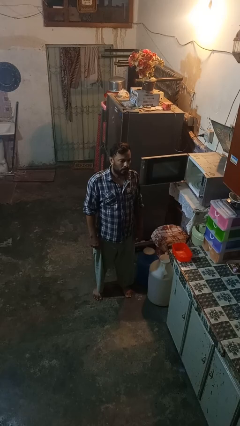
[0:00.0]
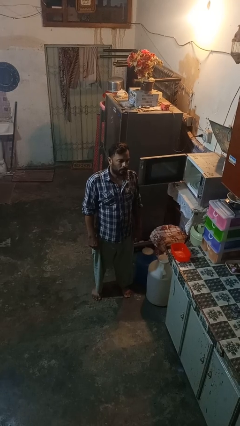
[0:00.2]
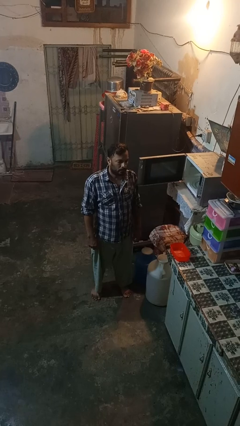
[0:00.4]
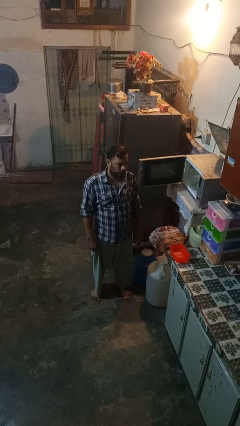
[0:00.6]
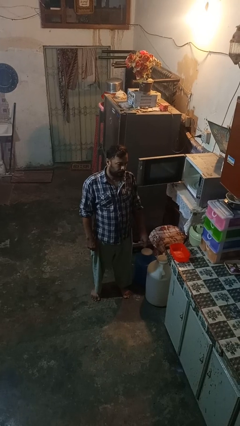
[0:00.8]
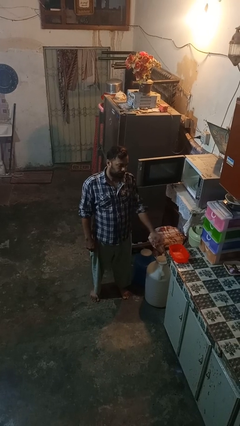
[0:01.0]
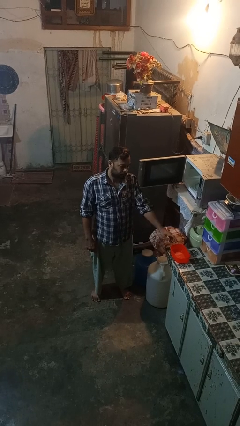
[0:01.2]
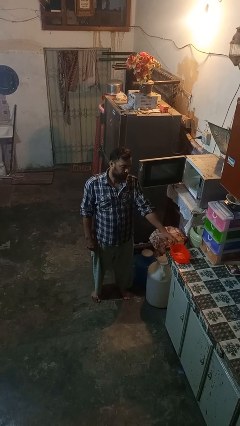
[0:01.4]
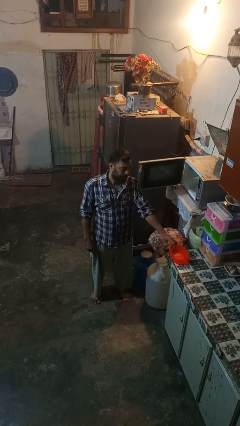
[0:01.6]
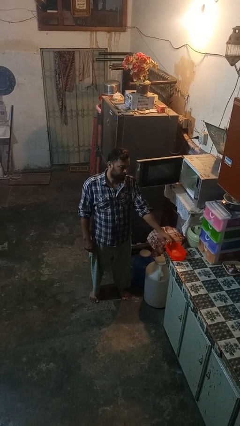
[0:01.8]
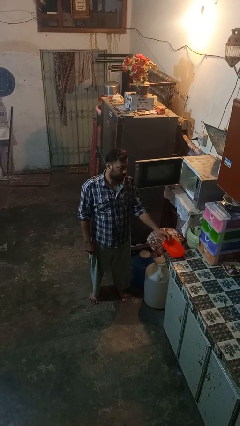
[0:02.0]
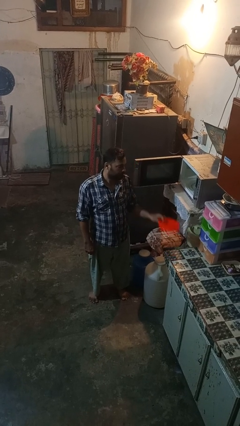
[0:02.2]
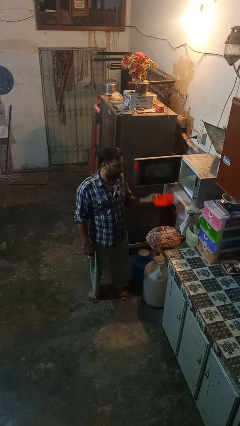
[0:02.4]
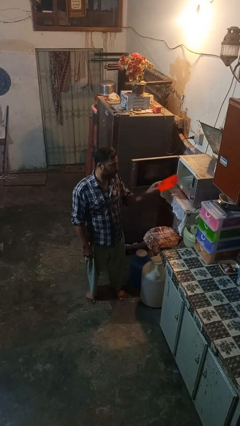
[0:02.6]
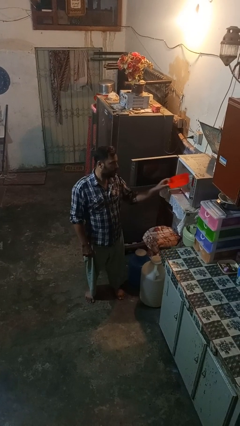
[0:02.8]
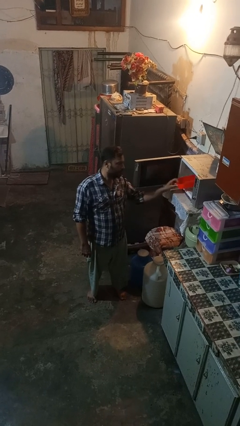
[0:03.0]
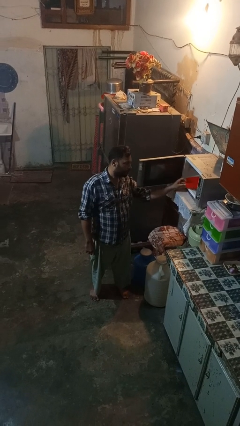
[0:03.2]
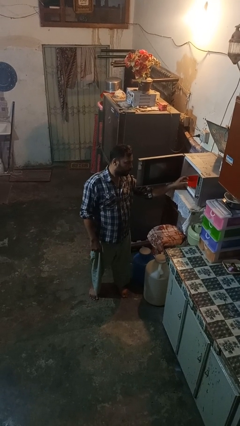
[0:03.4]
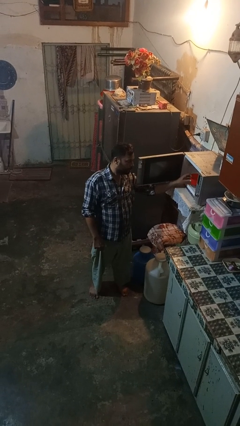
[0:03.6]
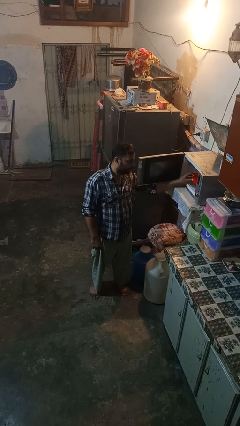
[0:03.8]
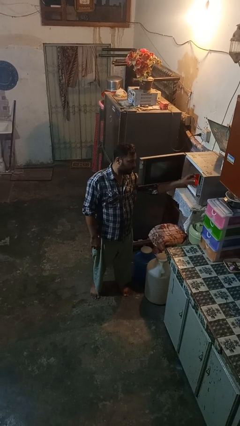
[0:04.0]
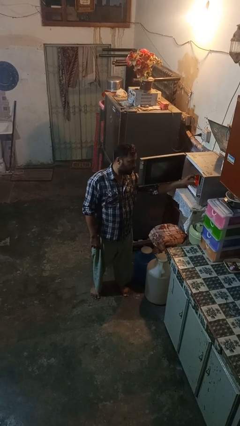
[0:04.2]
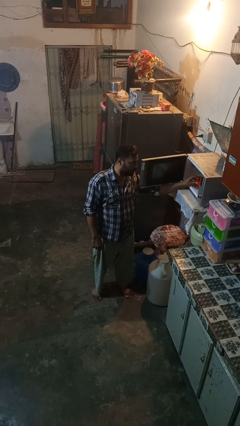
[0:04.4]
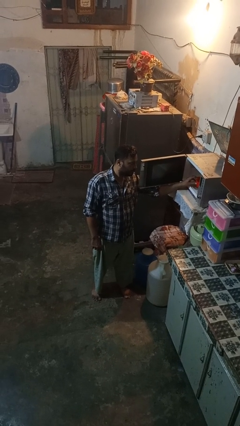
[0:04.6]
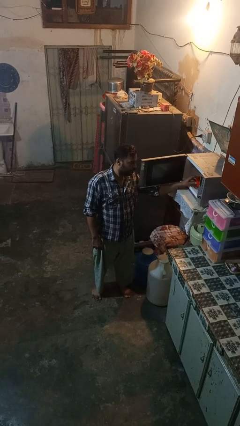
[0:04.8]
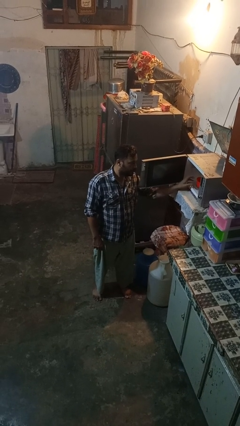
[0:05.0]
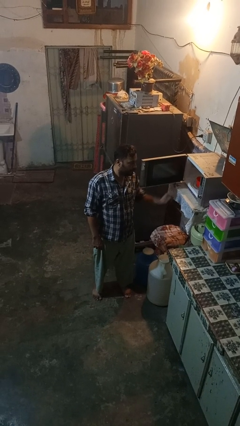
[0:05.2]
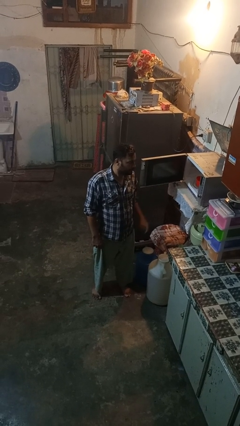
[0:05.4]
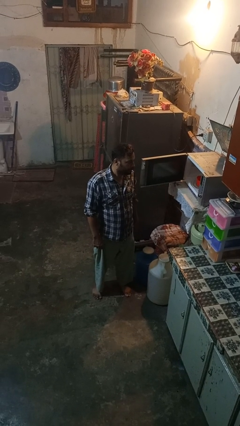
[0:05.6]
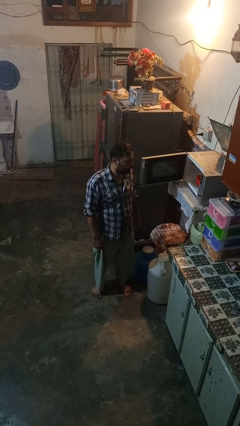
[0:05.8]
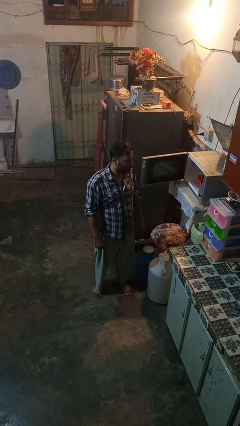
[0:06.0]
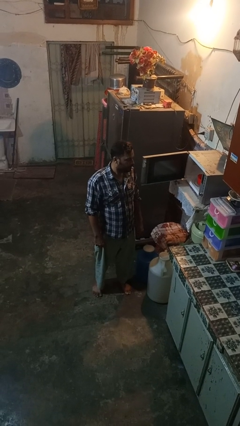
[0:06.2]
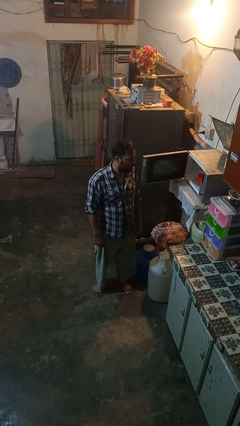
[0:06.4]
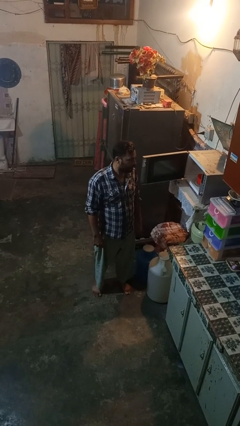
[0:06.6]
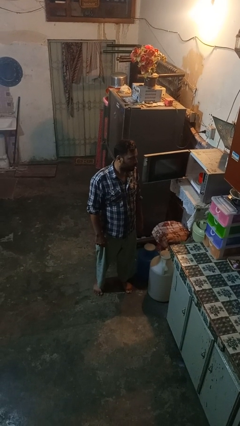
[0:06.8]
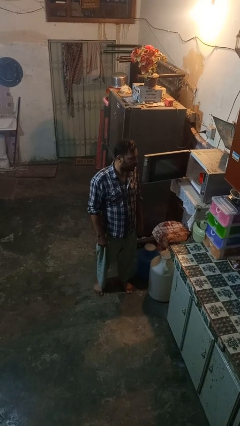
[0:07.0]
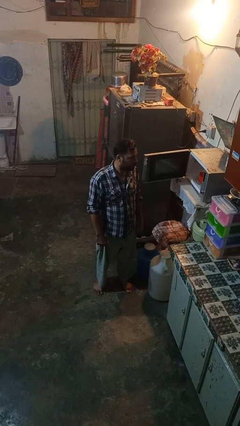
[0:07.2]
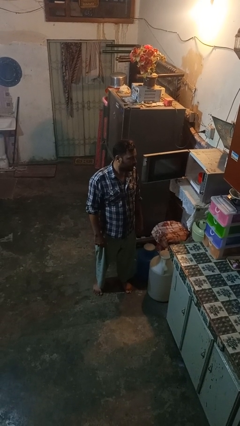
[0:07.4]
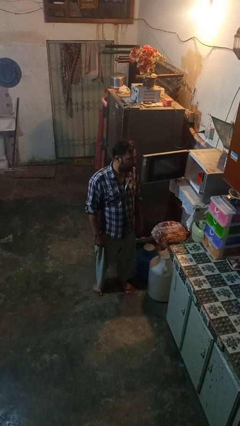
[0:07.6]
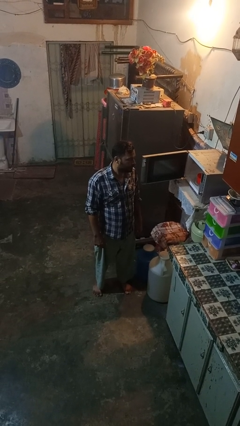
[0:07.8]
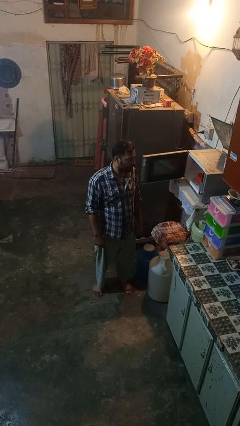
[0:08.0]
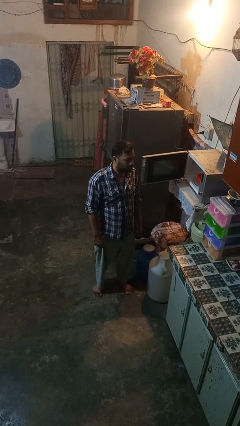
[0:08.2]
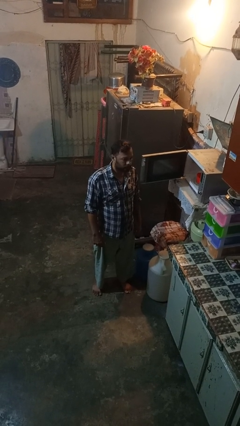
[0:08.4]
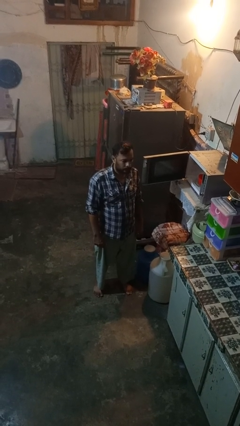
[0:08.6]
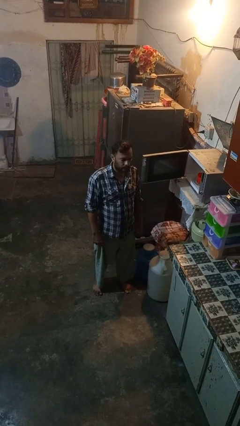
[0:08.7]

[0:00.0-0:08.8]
person puts object into microwave

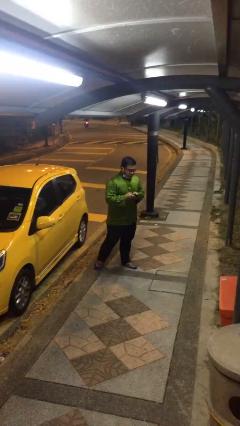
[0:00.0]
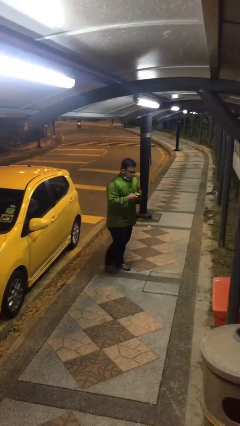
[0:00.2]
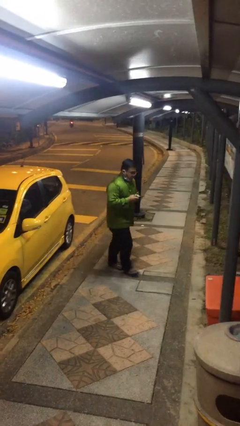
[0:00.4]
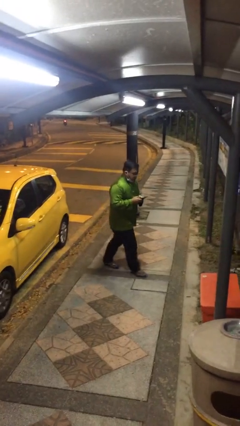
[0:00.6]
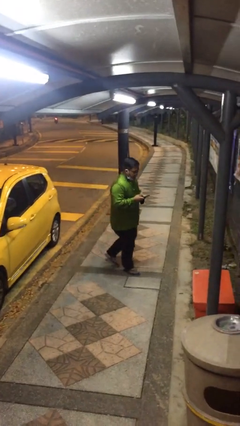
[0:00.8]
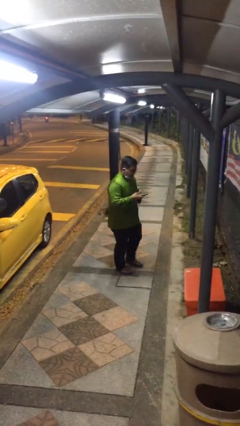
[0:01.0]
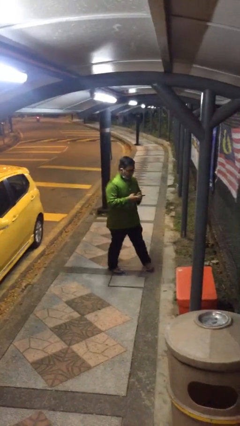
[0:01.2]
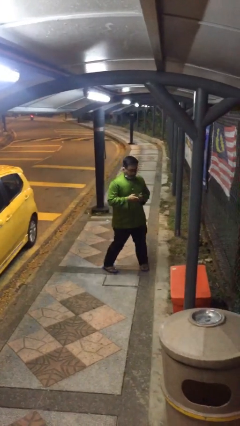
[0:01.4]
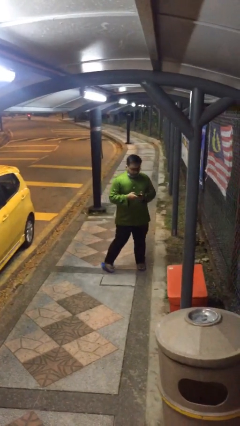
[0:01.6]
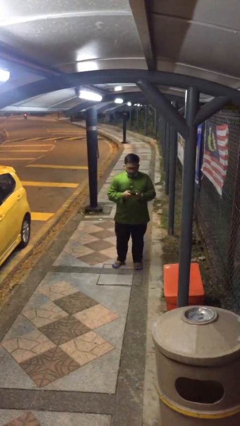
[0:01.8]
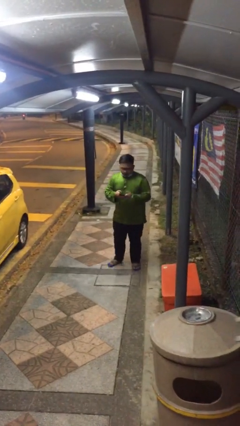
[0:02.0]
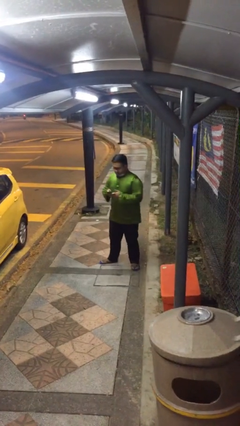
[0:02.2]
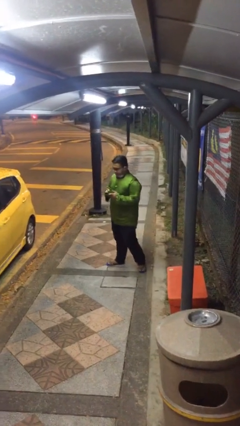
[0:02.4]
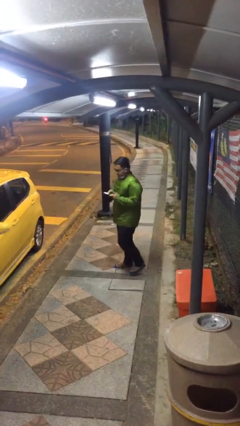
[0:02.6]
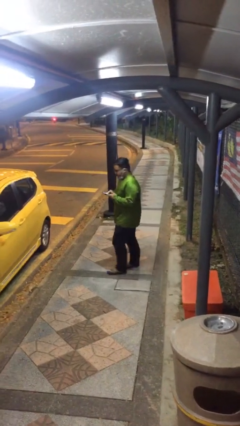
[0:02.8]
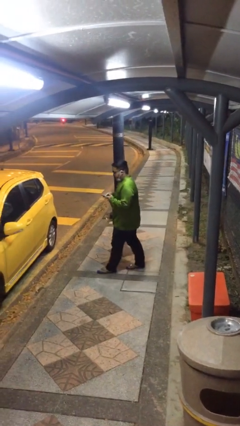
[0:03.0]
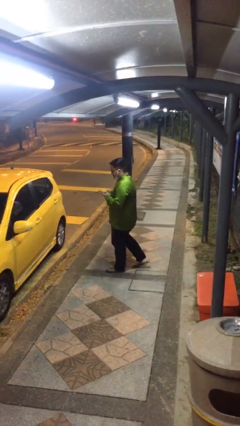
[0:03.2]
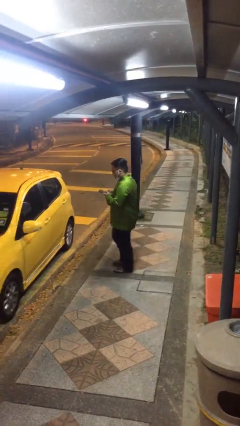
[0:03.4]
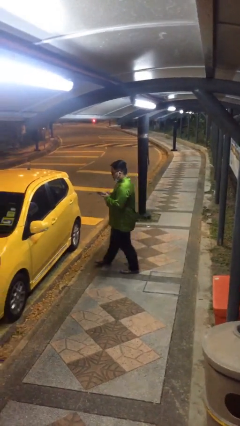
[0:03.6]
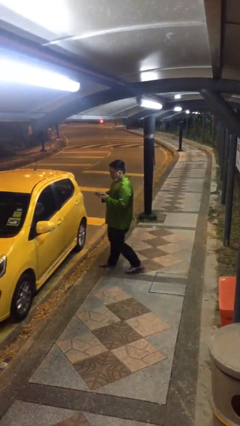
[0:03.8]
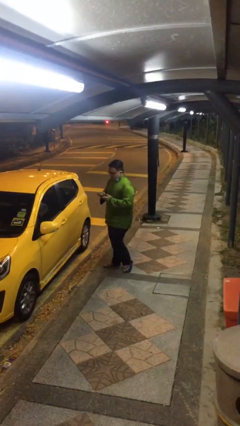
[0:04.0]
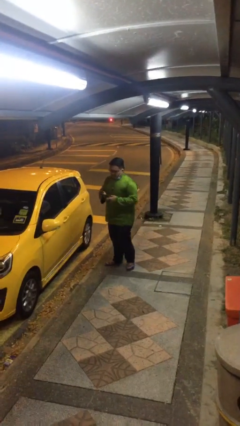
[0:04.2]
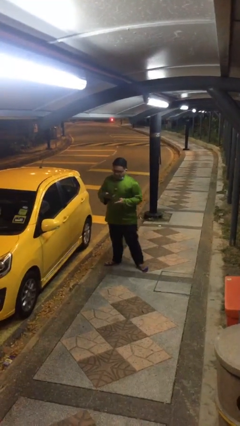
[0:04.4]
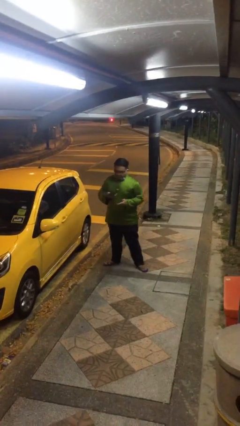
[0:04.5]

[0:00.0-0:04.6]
person texts on phone

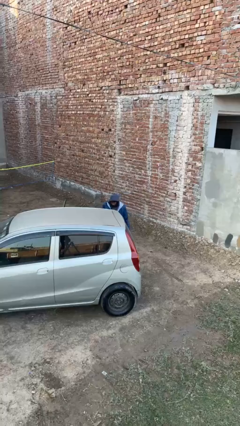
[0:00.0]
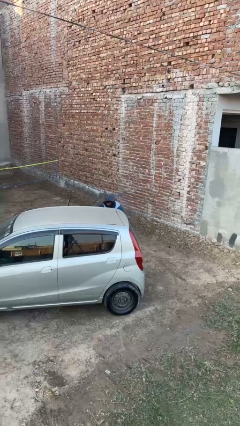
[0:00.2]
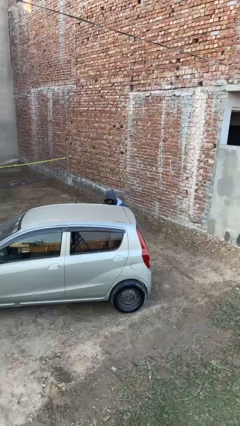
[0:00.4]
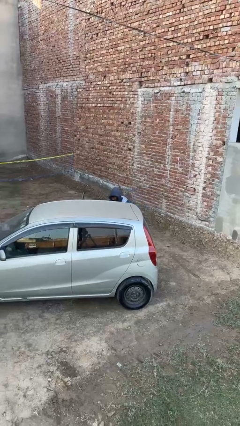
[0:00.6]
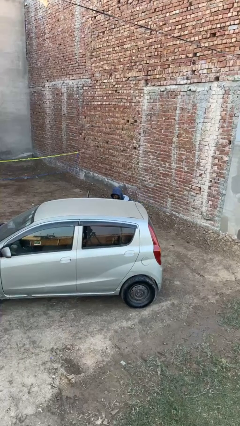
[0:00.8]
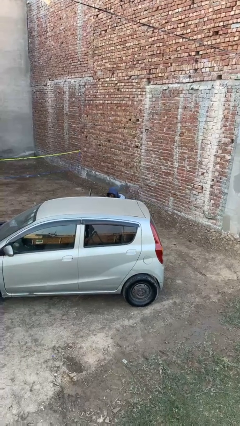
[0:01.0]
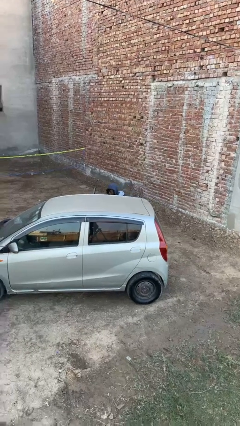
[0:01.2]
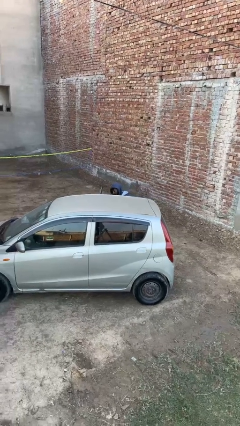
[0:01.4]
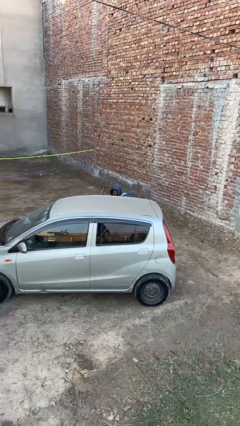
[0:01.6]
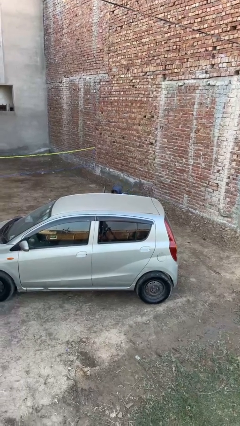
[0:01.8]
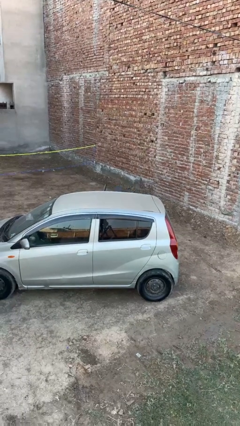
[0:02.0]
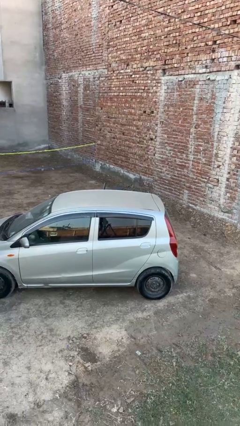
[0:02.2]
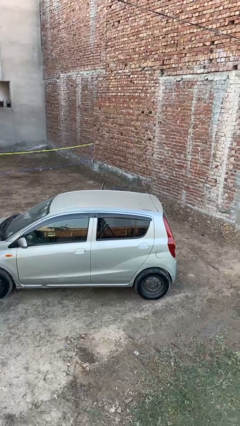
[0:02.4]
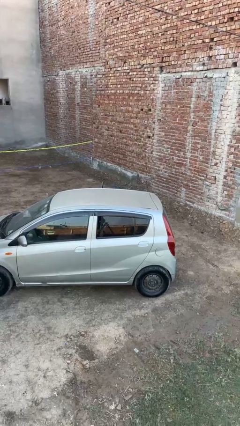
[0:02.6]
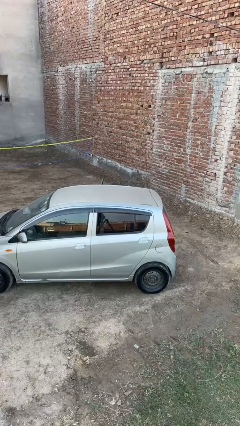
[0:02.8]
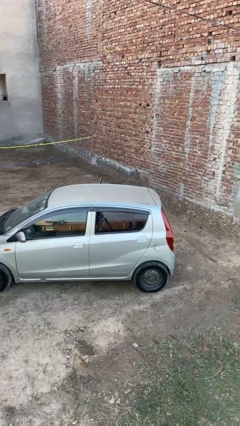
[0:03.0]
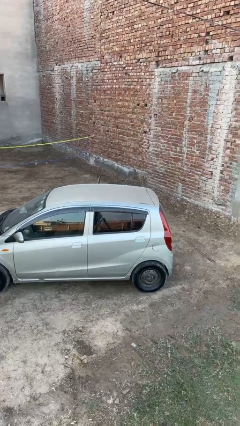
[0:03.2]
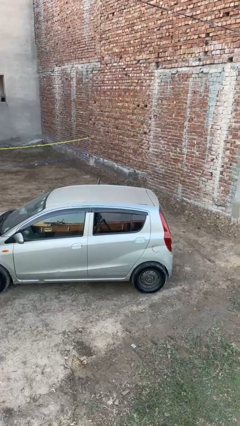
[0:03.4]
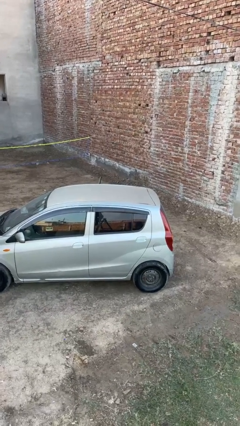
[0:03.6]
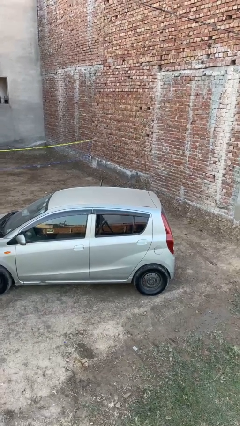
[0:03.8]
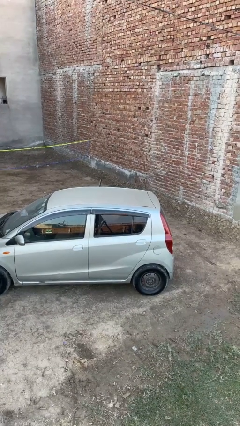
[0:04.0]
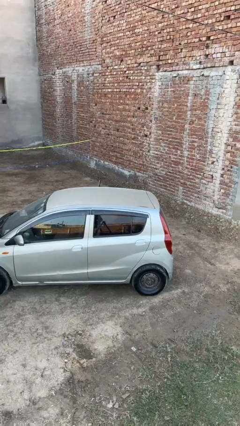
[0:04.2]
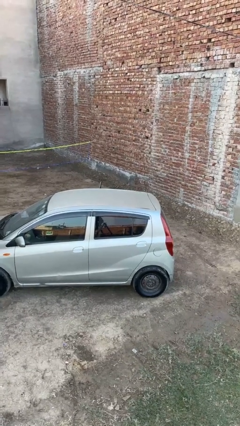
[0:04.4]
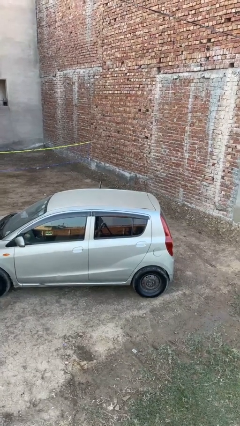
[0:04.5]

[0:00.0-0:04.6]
person enters car
